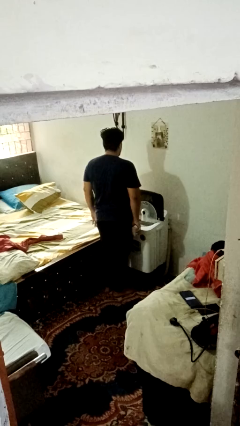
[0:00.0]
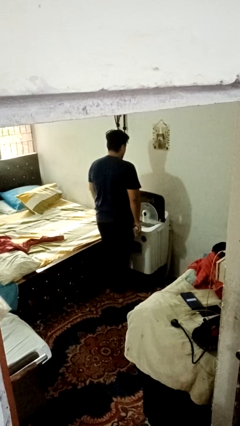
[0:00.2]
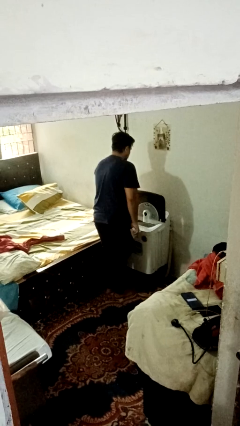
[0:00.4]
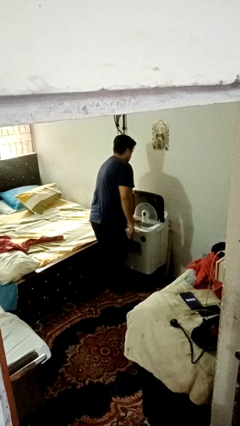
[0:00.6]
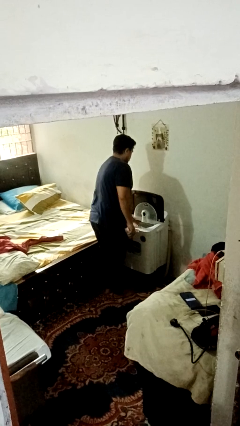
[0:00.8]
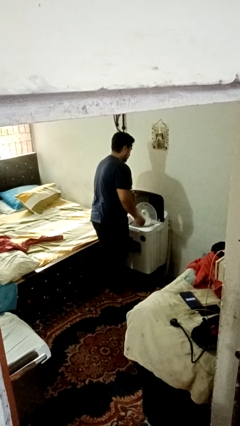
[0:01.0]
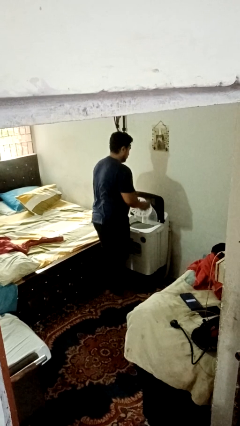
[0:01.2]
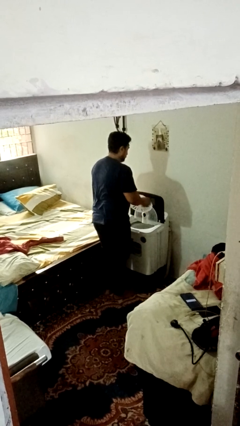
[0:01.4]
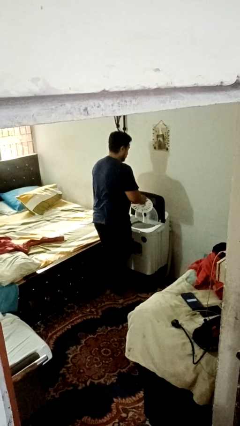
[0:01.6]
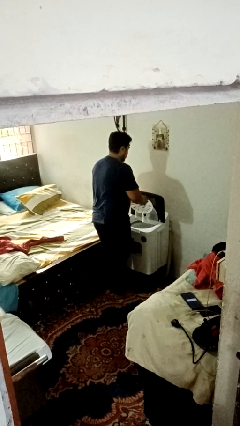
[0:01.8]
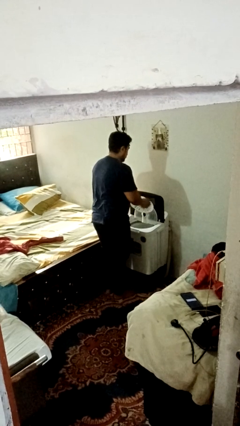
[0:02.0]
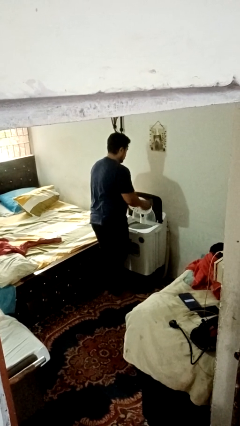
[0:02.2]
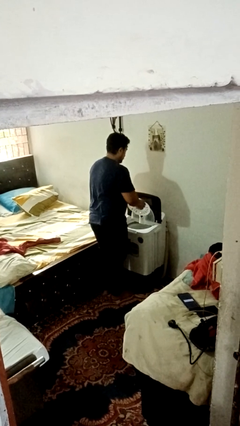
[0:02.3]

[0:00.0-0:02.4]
person cleans dryer lint trap

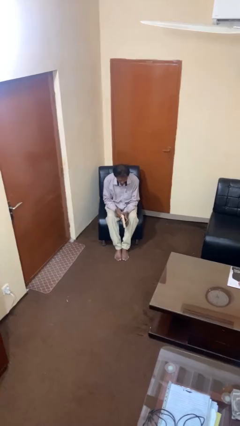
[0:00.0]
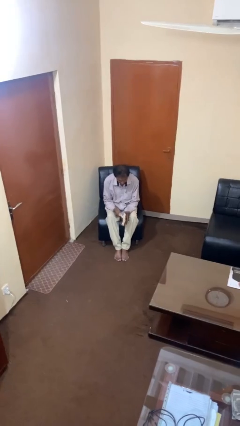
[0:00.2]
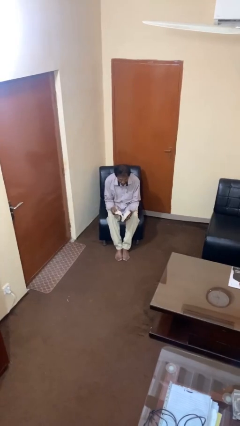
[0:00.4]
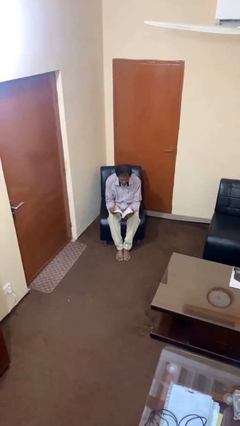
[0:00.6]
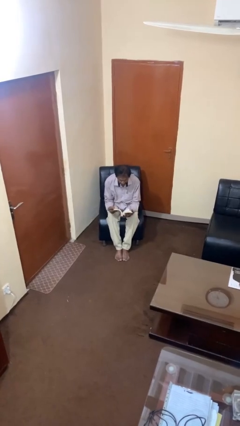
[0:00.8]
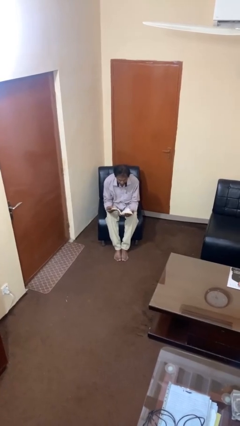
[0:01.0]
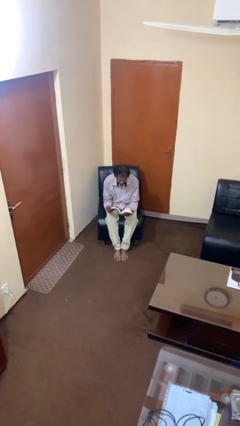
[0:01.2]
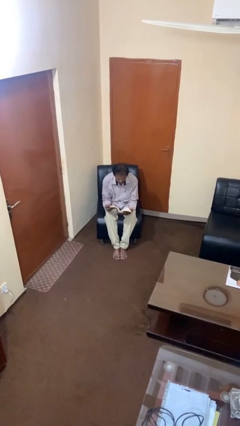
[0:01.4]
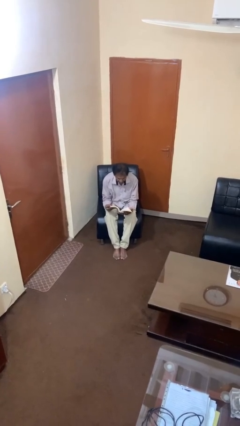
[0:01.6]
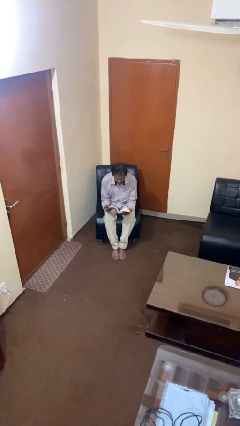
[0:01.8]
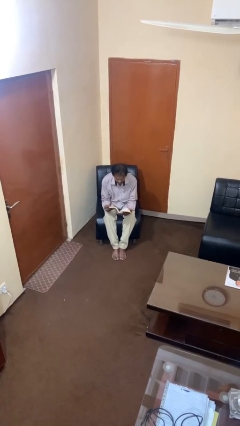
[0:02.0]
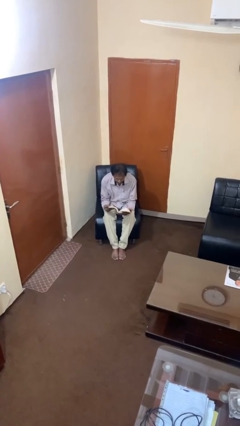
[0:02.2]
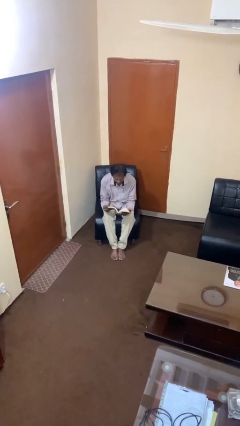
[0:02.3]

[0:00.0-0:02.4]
person reads book

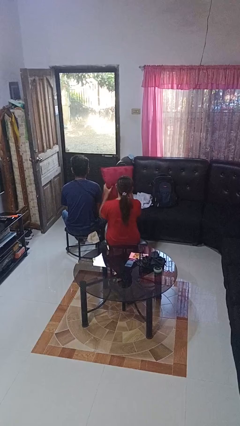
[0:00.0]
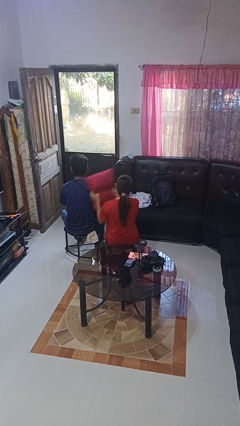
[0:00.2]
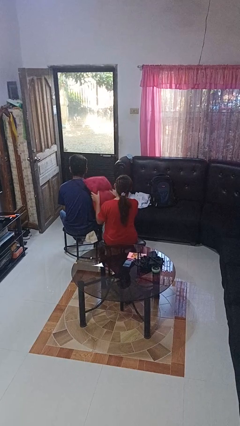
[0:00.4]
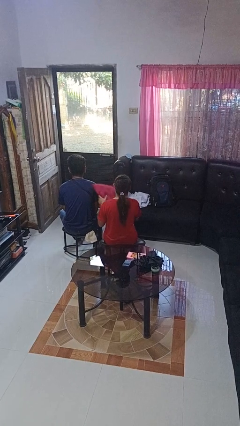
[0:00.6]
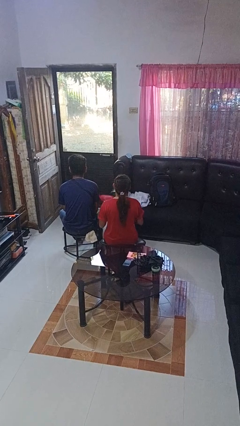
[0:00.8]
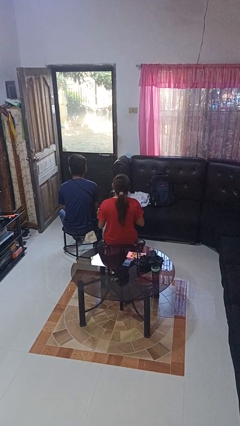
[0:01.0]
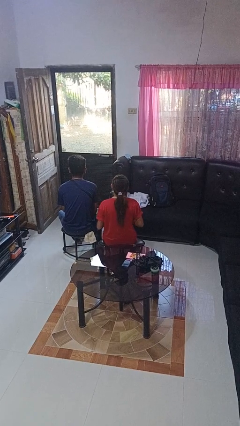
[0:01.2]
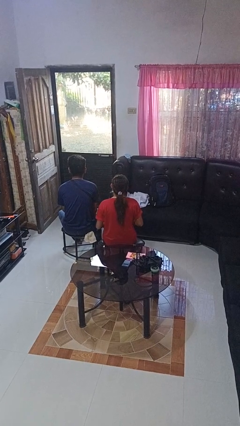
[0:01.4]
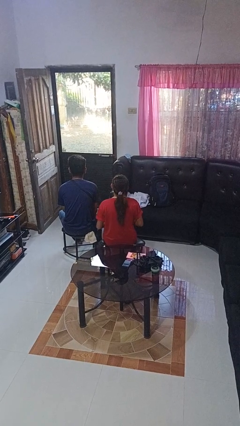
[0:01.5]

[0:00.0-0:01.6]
person hits person with pillow

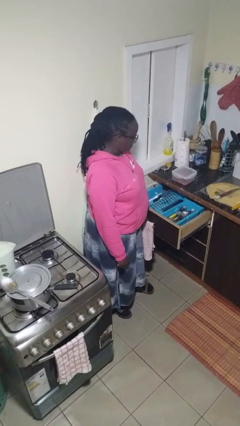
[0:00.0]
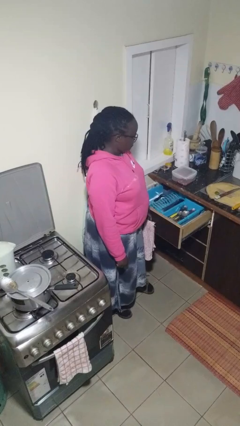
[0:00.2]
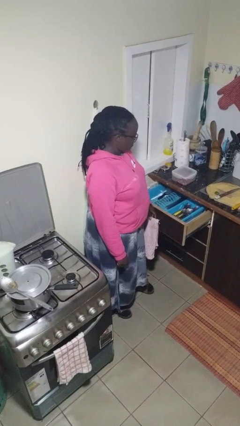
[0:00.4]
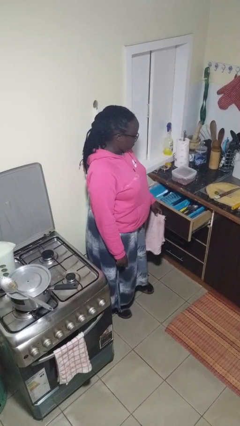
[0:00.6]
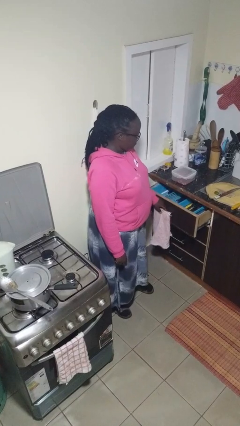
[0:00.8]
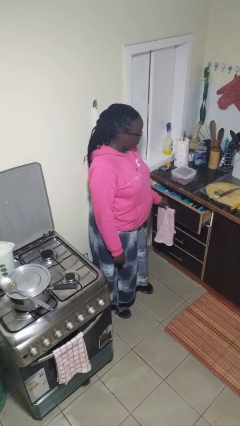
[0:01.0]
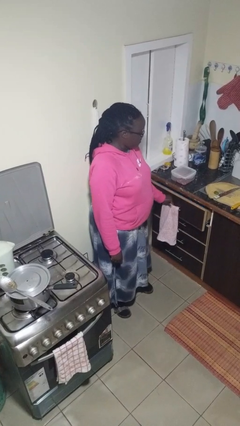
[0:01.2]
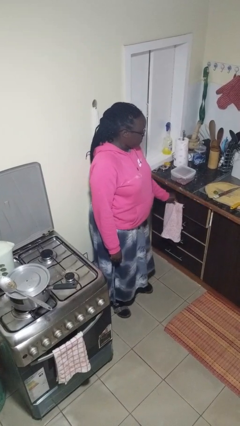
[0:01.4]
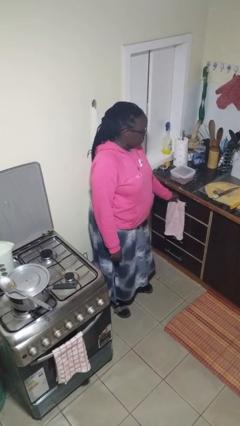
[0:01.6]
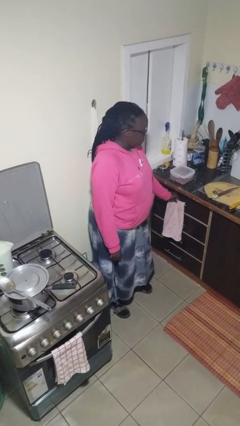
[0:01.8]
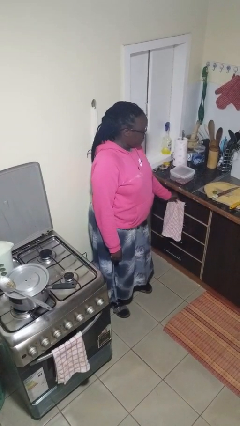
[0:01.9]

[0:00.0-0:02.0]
person closes kitchen drawer

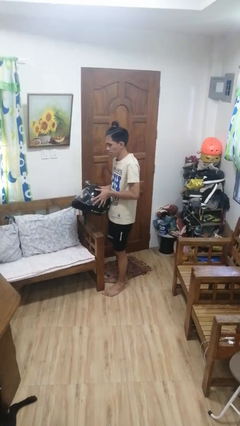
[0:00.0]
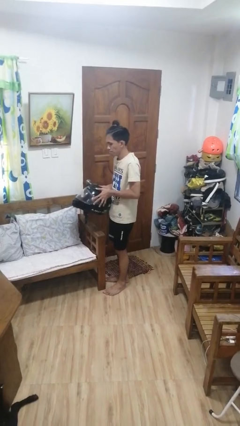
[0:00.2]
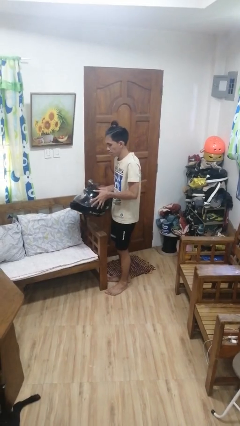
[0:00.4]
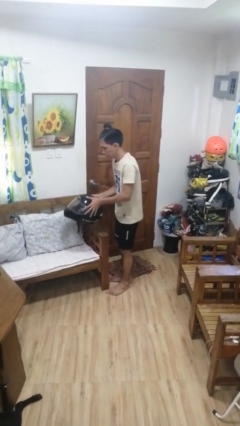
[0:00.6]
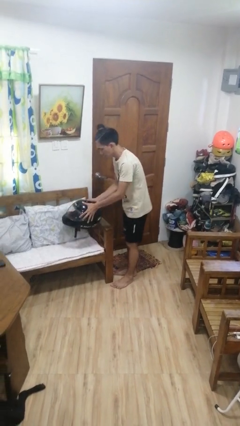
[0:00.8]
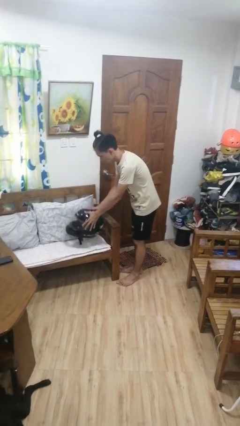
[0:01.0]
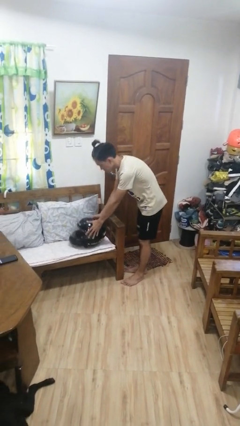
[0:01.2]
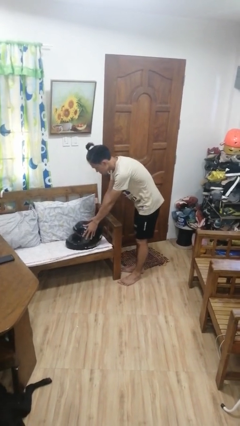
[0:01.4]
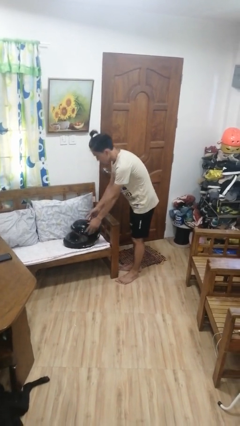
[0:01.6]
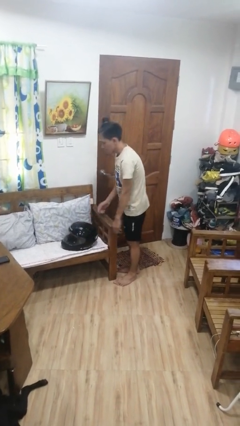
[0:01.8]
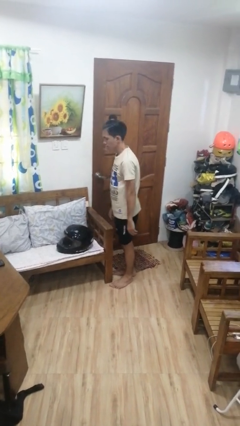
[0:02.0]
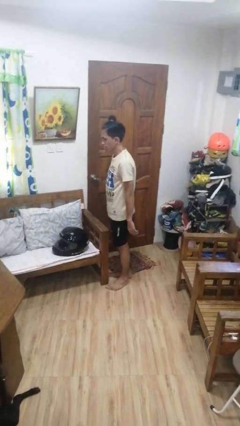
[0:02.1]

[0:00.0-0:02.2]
person puts down object on couch

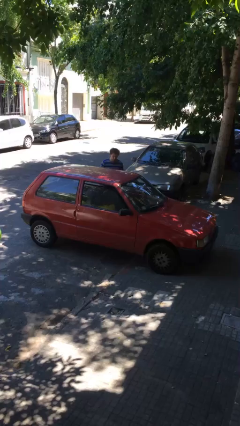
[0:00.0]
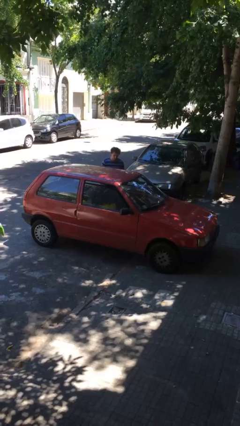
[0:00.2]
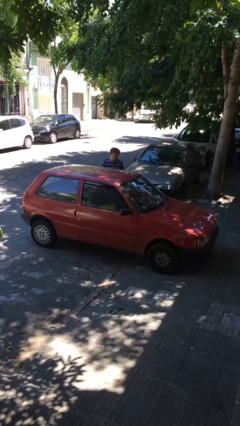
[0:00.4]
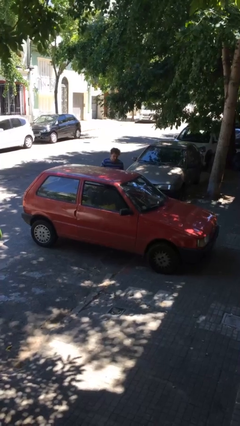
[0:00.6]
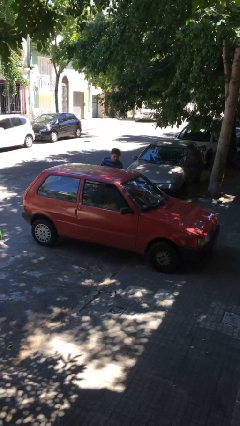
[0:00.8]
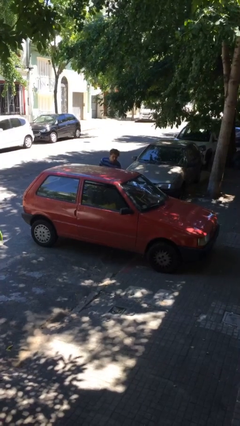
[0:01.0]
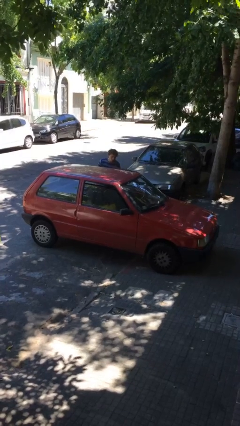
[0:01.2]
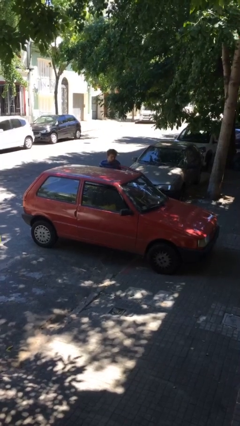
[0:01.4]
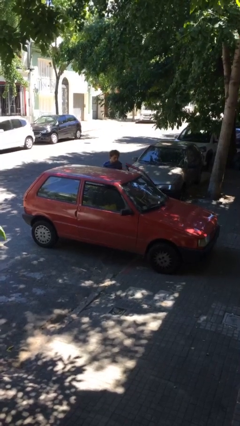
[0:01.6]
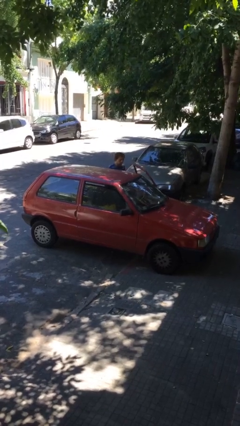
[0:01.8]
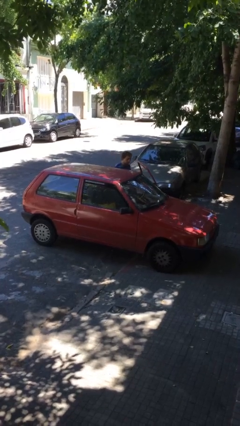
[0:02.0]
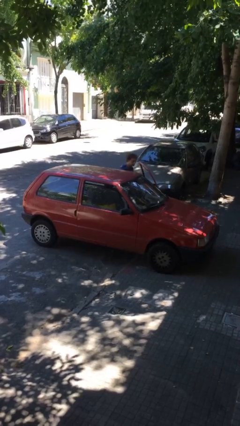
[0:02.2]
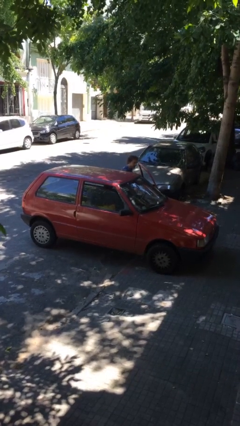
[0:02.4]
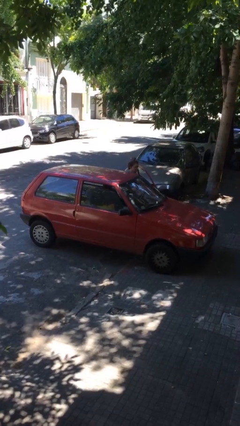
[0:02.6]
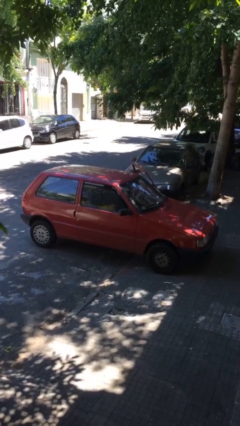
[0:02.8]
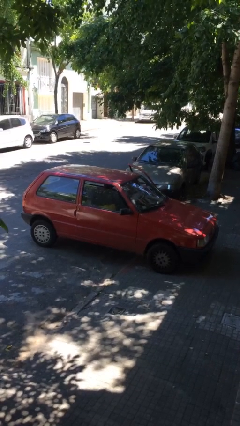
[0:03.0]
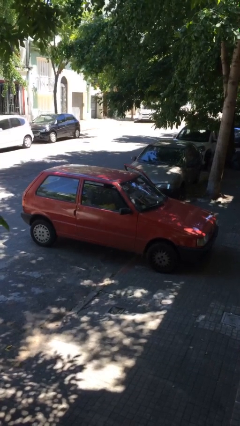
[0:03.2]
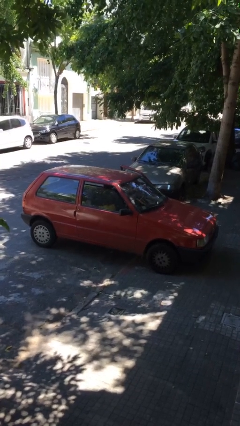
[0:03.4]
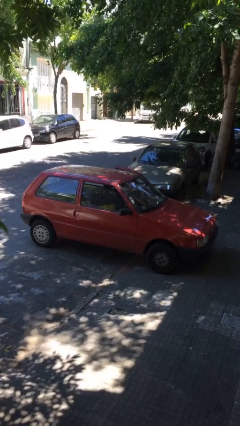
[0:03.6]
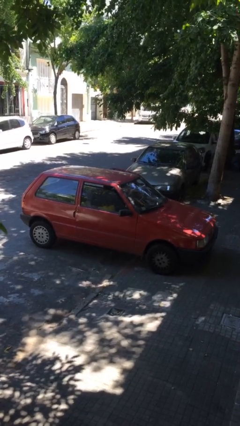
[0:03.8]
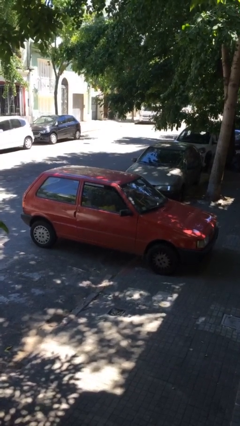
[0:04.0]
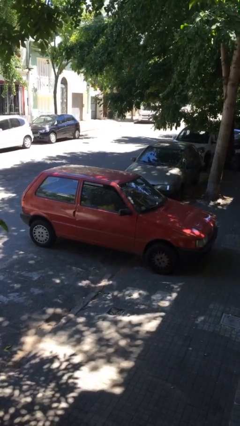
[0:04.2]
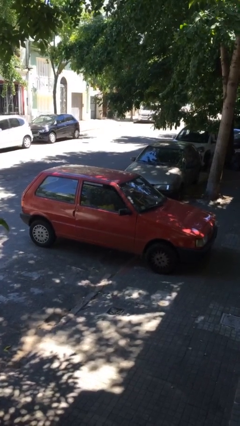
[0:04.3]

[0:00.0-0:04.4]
car picks up person

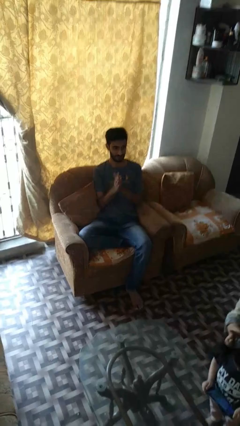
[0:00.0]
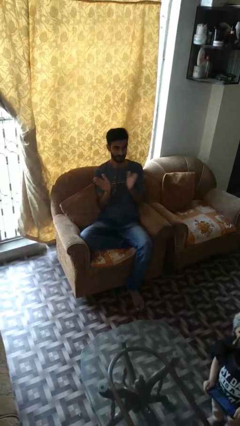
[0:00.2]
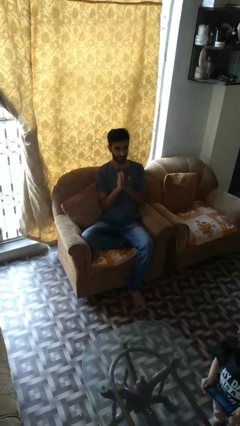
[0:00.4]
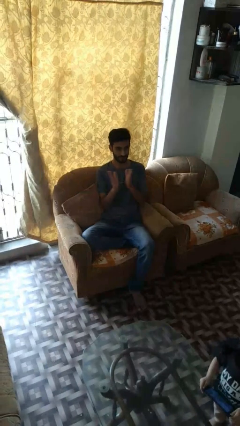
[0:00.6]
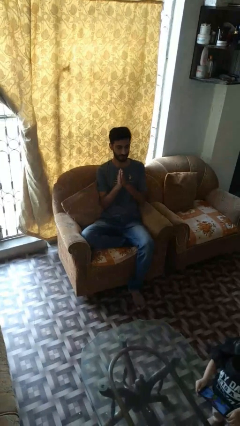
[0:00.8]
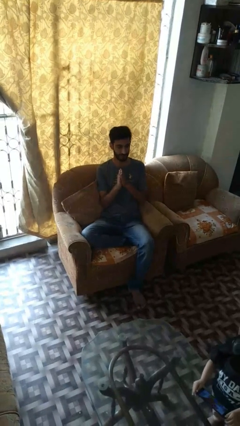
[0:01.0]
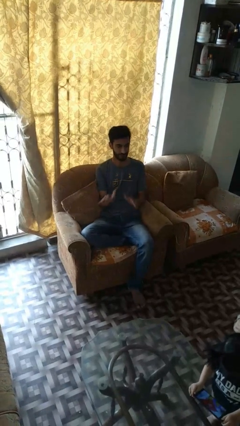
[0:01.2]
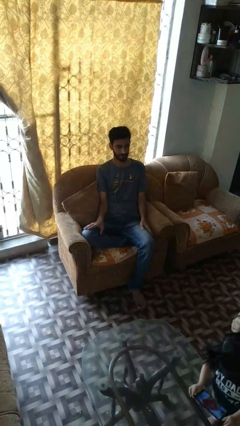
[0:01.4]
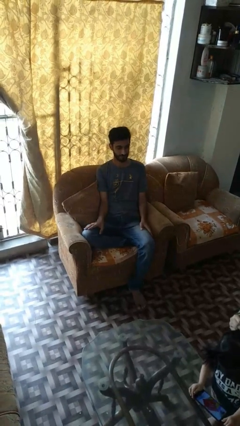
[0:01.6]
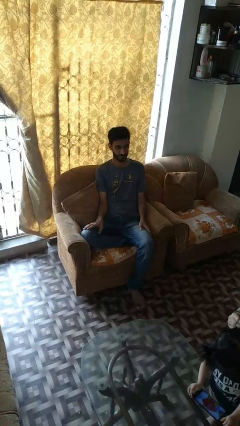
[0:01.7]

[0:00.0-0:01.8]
person claps hands
